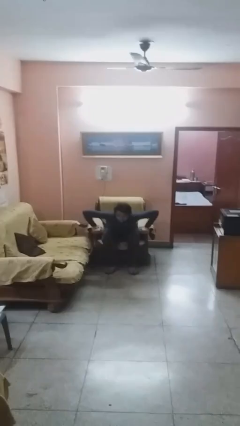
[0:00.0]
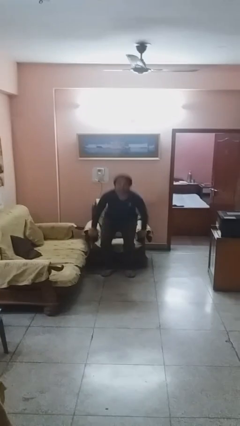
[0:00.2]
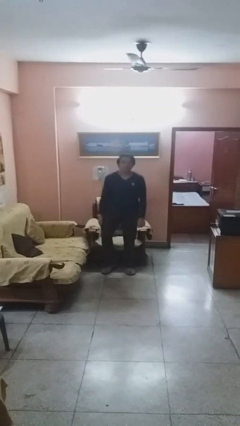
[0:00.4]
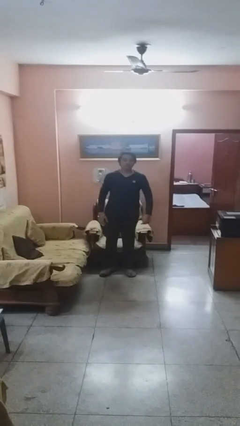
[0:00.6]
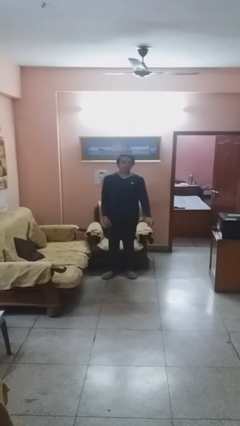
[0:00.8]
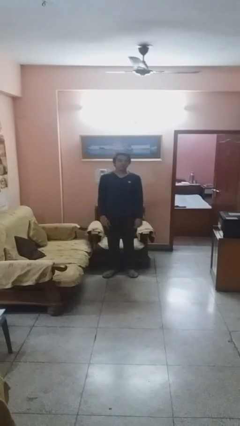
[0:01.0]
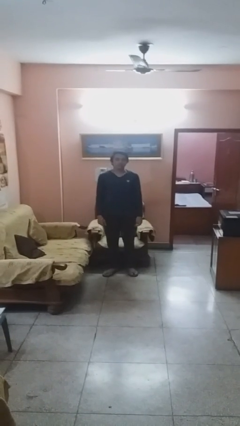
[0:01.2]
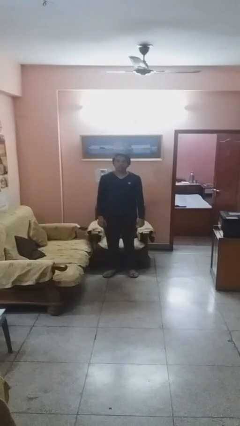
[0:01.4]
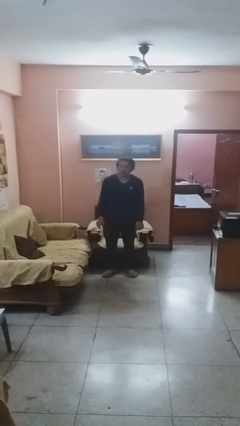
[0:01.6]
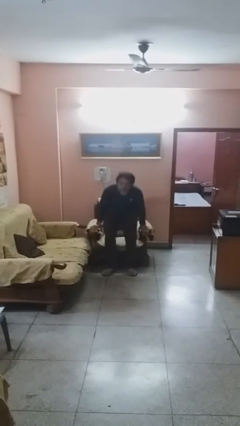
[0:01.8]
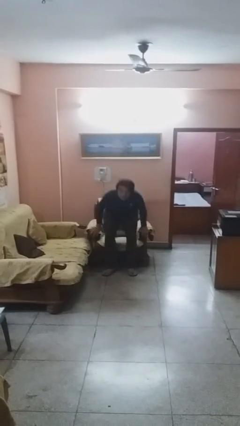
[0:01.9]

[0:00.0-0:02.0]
person stands up

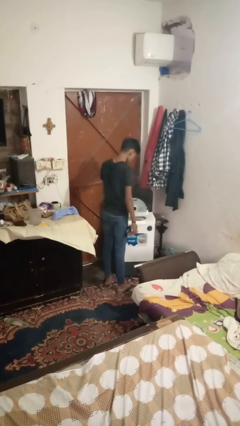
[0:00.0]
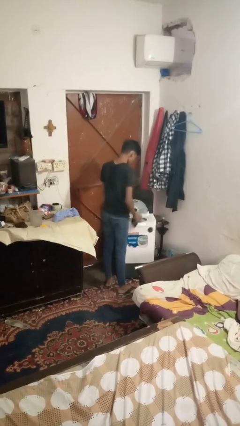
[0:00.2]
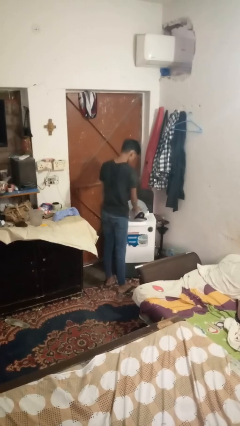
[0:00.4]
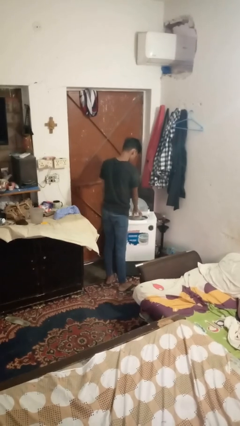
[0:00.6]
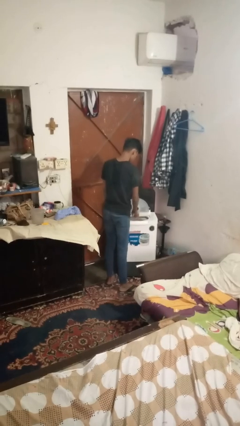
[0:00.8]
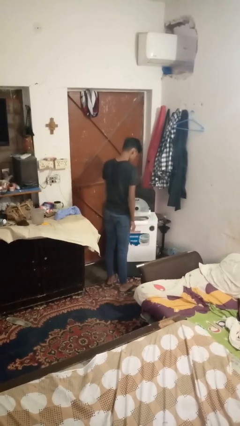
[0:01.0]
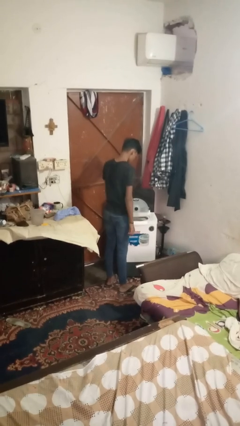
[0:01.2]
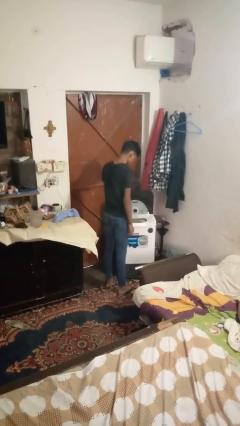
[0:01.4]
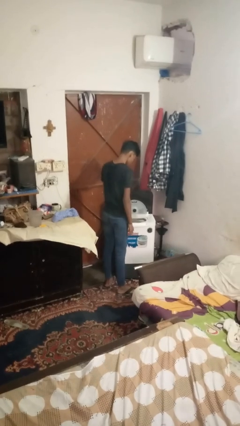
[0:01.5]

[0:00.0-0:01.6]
person loads clotheswasher

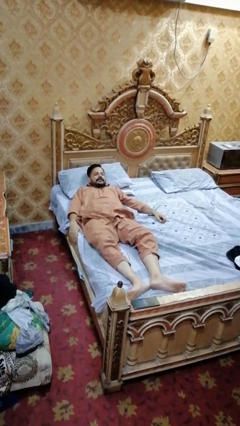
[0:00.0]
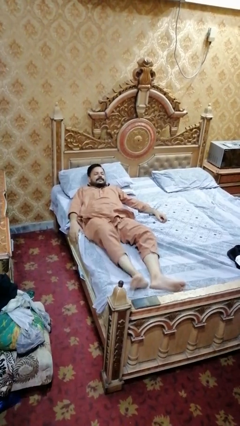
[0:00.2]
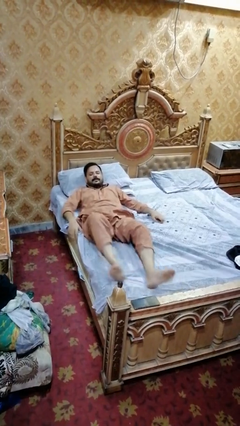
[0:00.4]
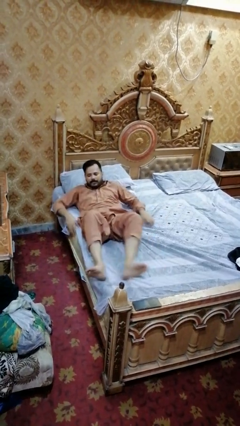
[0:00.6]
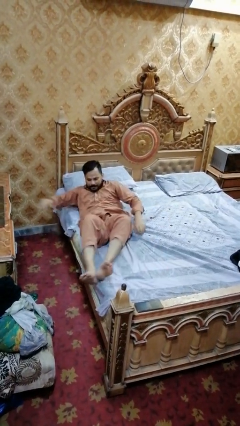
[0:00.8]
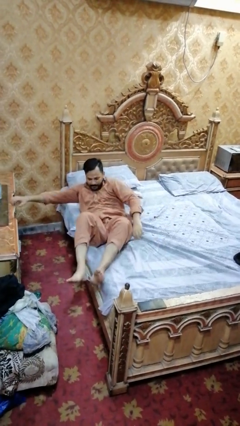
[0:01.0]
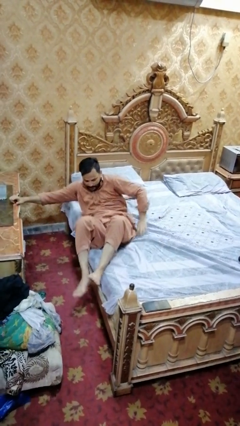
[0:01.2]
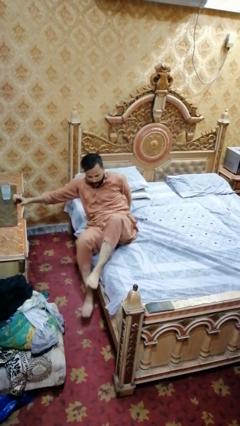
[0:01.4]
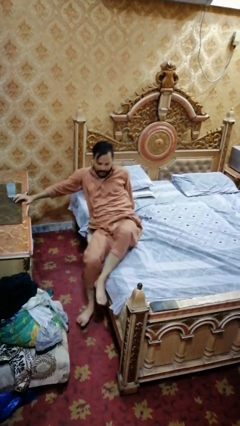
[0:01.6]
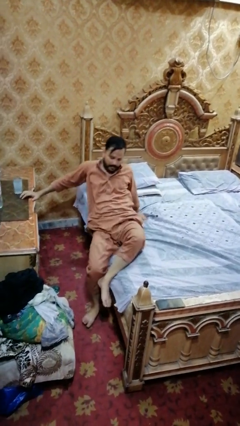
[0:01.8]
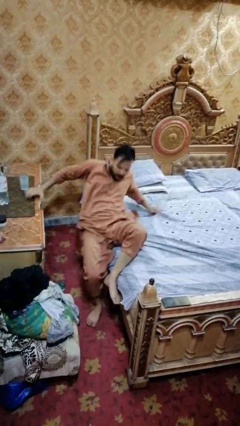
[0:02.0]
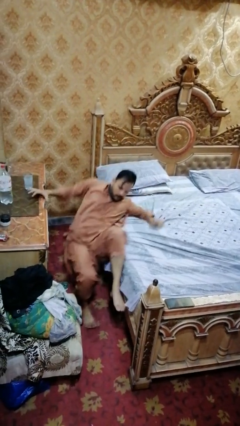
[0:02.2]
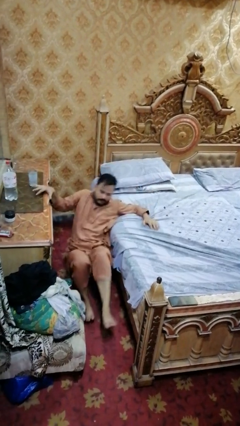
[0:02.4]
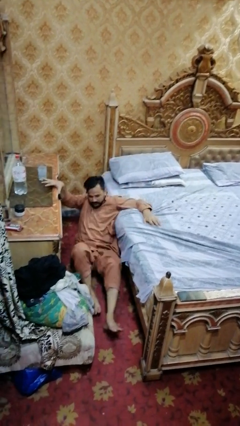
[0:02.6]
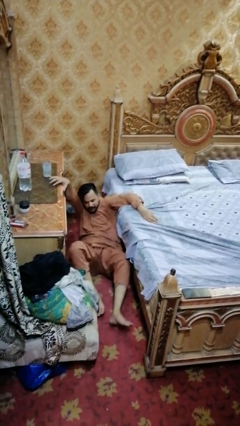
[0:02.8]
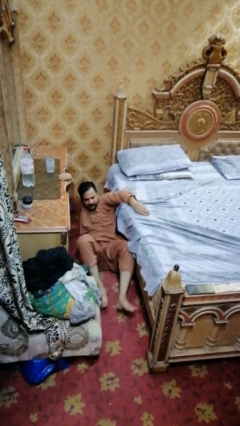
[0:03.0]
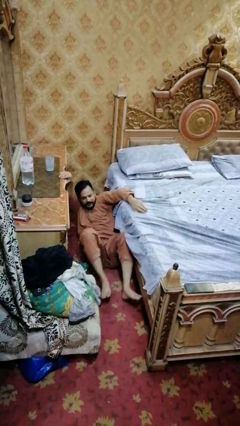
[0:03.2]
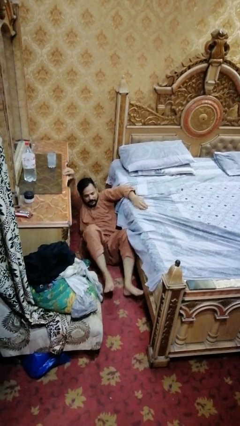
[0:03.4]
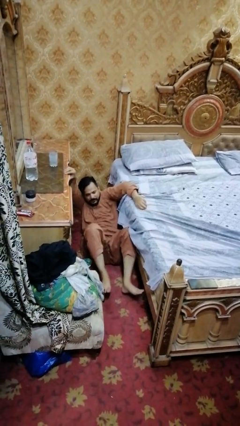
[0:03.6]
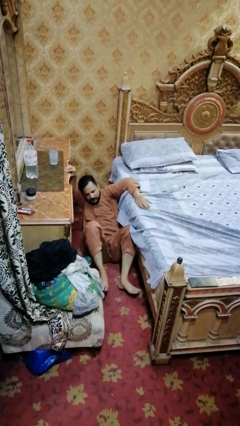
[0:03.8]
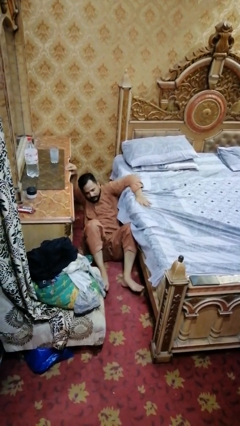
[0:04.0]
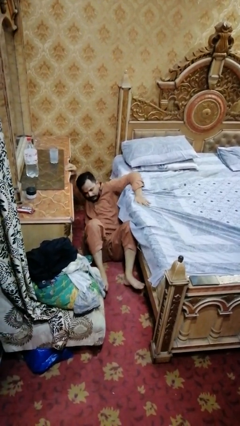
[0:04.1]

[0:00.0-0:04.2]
person falls from bed

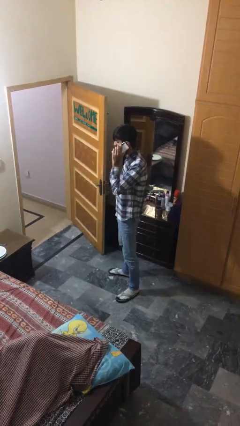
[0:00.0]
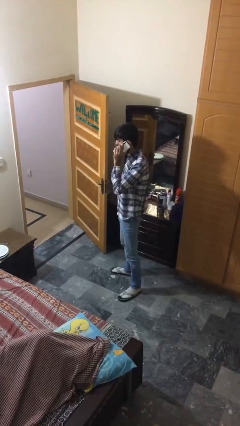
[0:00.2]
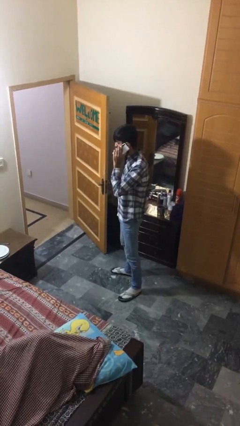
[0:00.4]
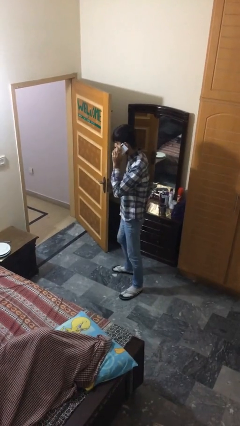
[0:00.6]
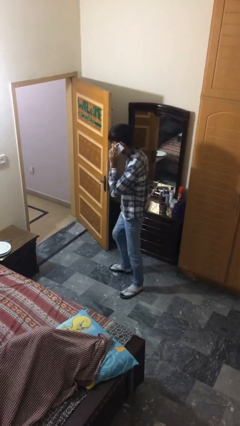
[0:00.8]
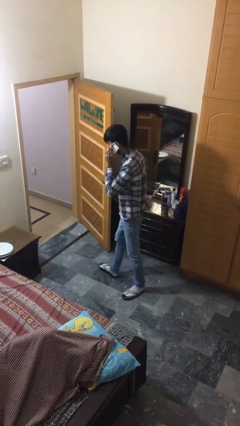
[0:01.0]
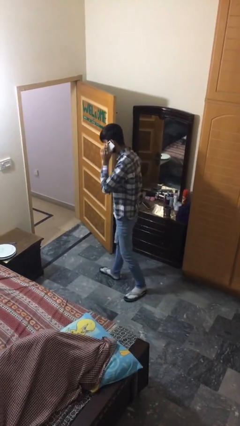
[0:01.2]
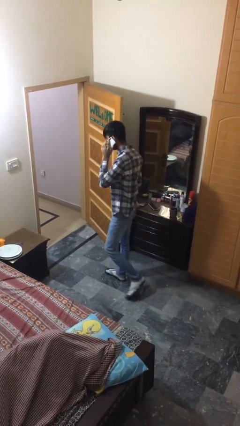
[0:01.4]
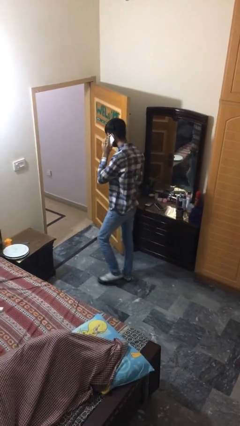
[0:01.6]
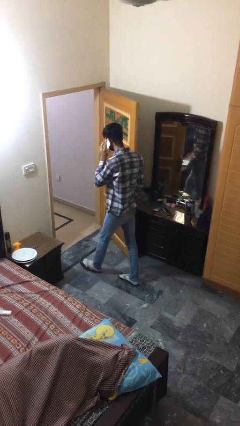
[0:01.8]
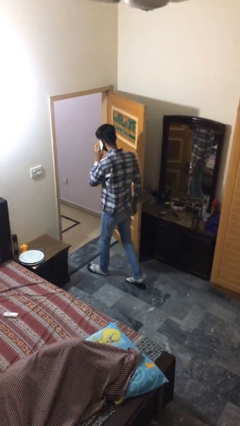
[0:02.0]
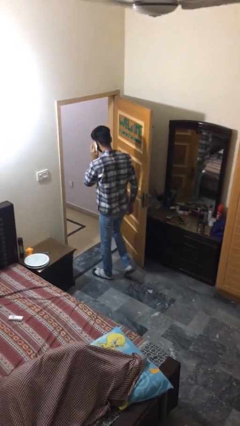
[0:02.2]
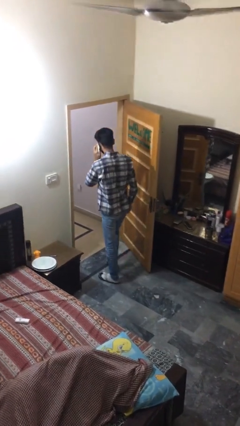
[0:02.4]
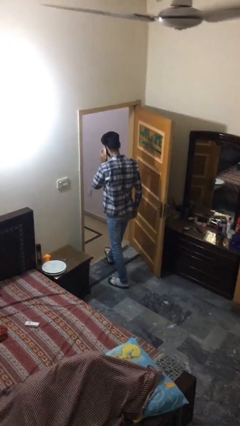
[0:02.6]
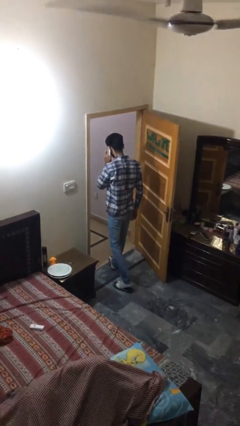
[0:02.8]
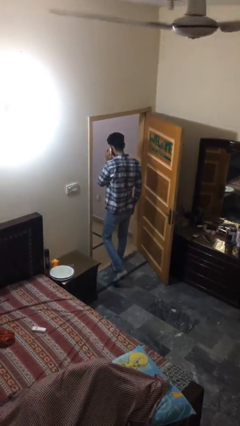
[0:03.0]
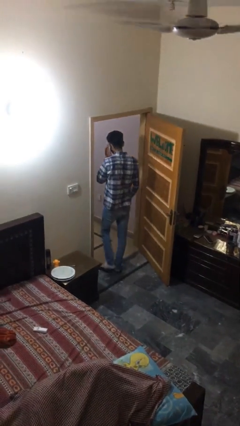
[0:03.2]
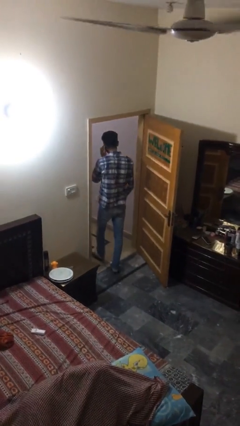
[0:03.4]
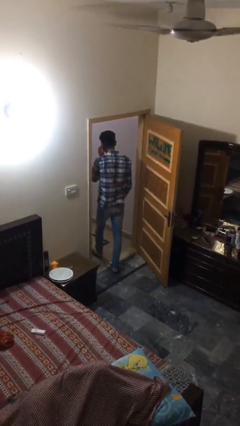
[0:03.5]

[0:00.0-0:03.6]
person exits scene through structure

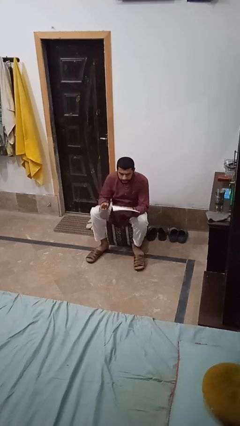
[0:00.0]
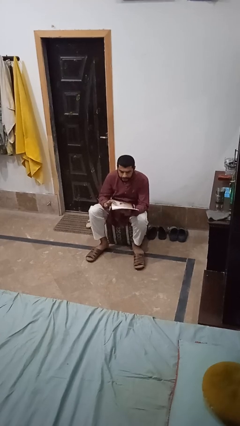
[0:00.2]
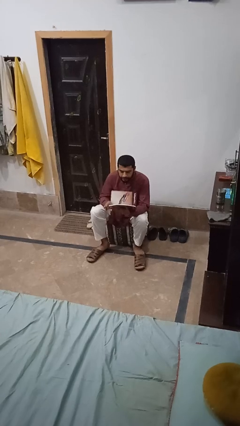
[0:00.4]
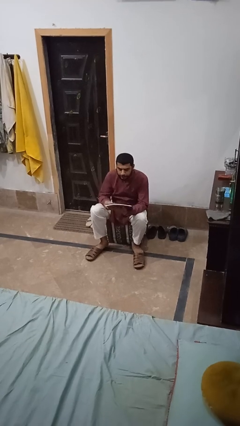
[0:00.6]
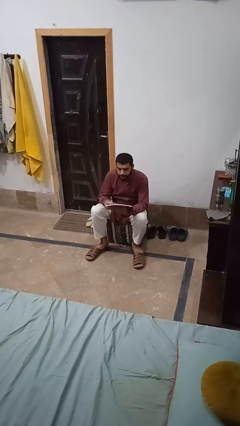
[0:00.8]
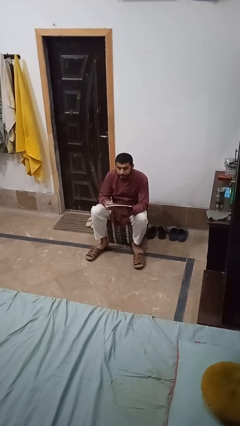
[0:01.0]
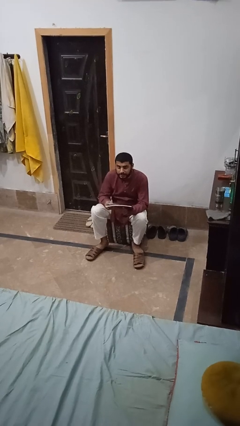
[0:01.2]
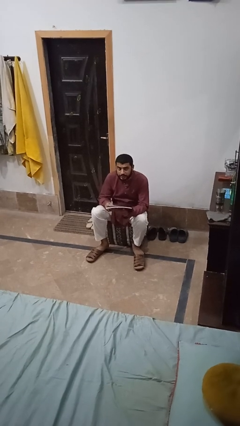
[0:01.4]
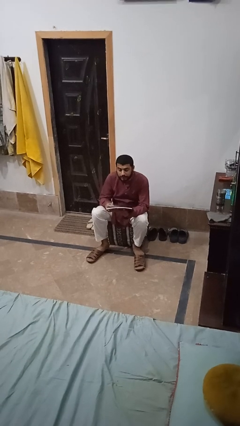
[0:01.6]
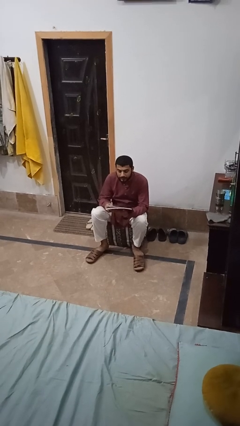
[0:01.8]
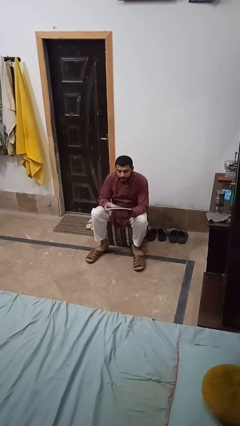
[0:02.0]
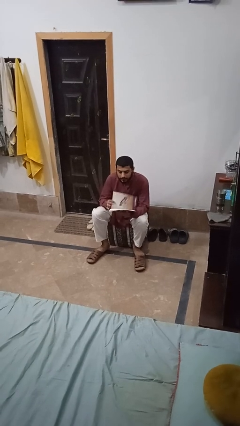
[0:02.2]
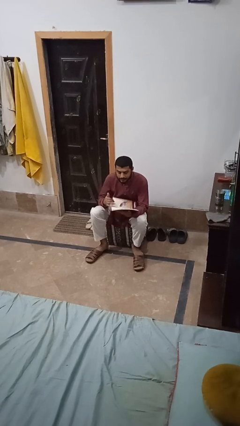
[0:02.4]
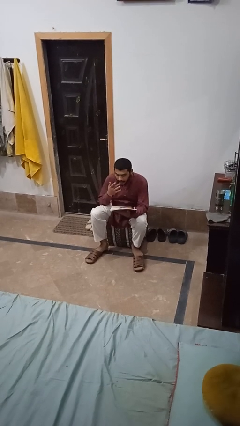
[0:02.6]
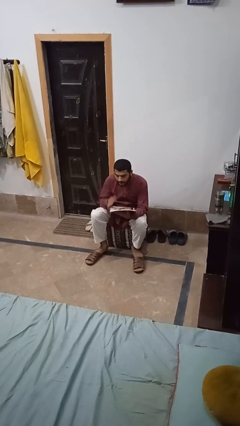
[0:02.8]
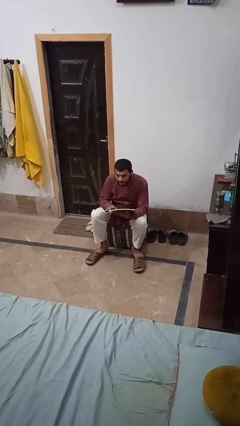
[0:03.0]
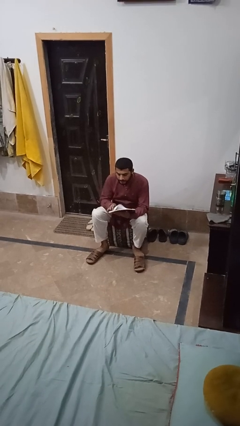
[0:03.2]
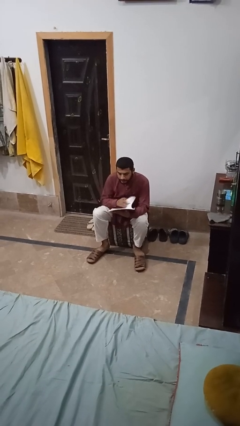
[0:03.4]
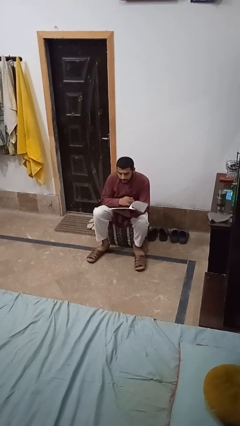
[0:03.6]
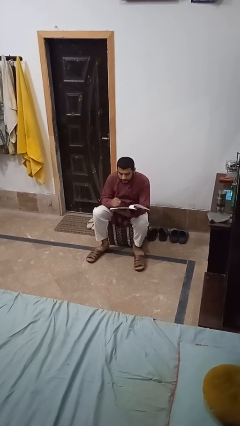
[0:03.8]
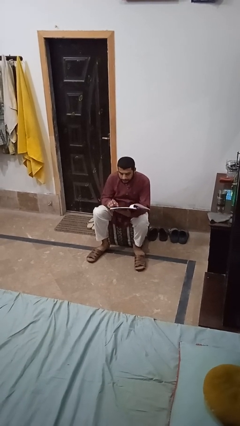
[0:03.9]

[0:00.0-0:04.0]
person sits crisscross

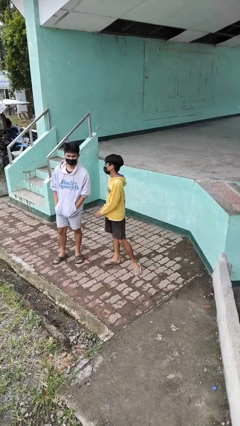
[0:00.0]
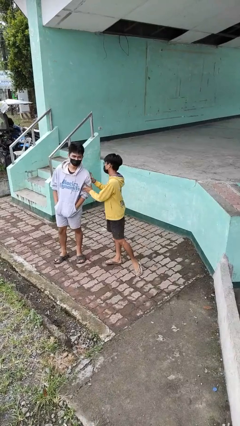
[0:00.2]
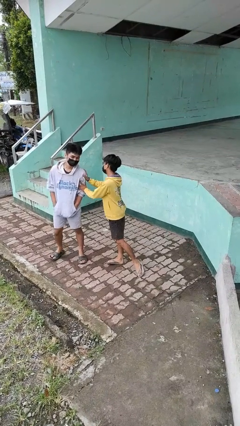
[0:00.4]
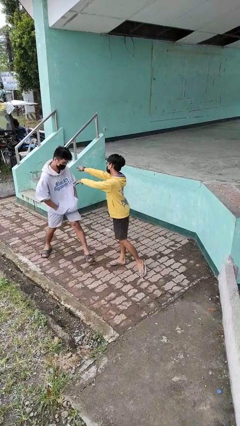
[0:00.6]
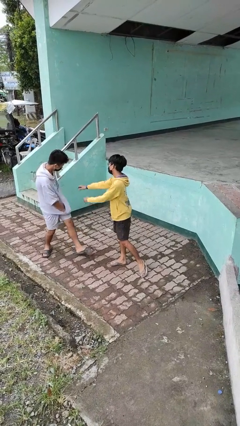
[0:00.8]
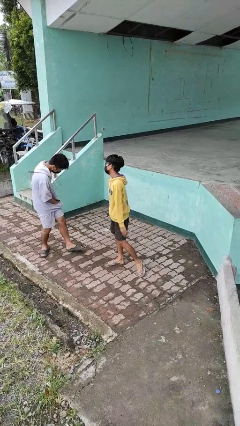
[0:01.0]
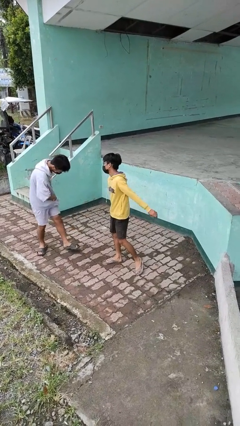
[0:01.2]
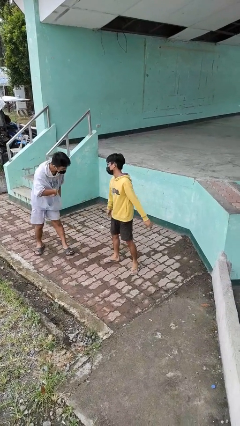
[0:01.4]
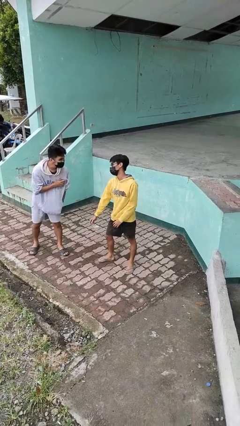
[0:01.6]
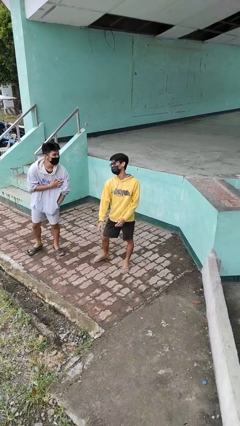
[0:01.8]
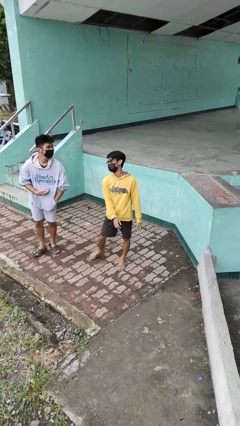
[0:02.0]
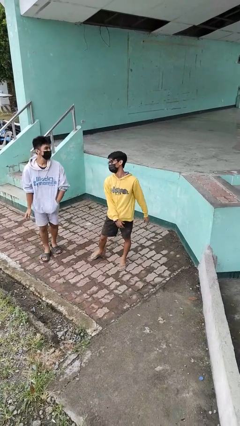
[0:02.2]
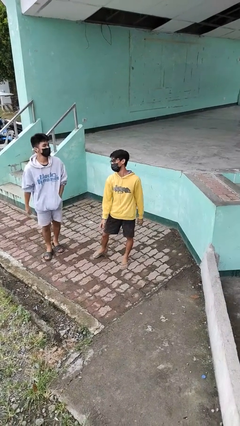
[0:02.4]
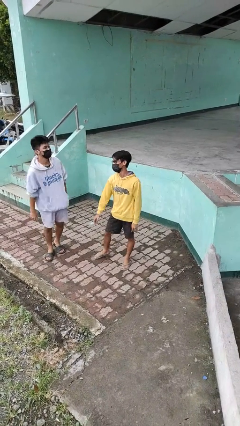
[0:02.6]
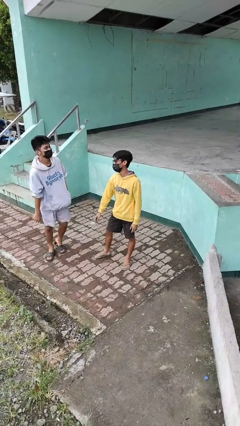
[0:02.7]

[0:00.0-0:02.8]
person shoves person
